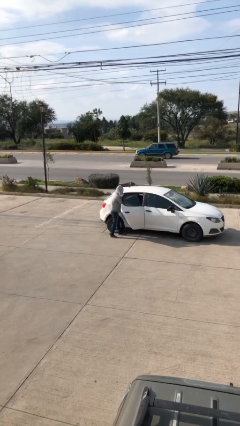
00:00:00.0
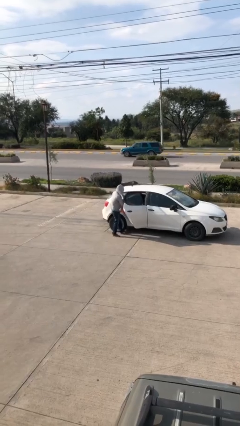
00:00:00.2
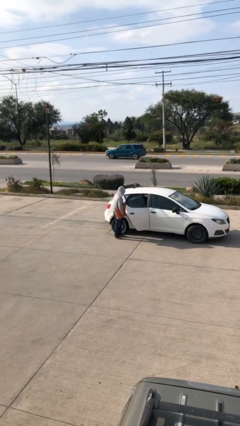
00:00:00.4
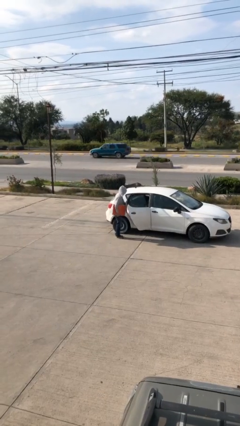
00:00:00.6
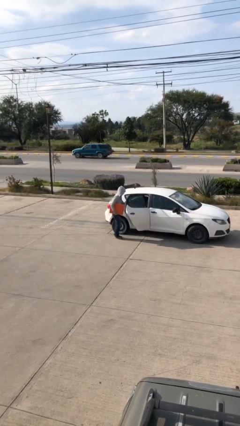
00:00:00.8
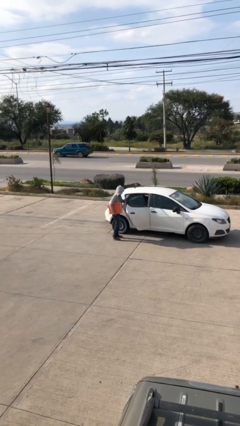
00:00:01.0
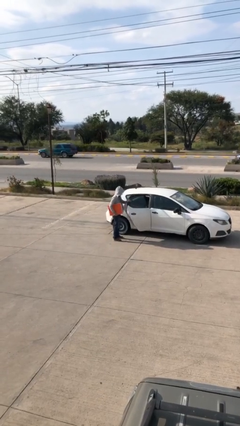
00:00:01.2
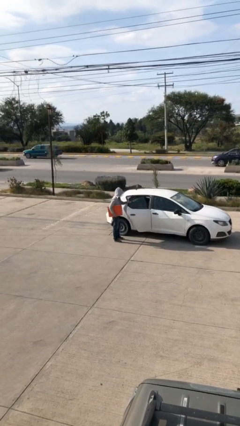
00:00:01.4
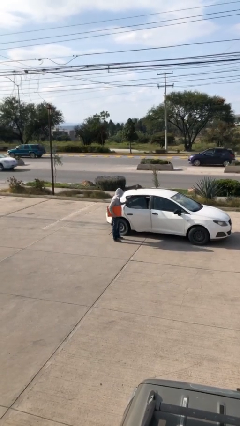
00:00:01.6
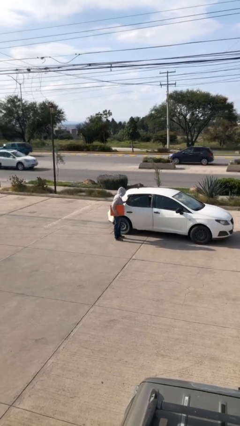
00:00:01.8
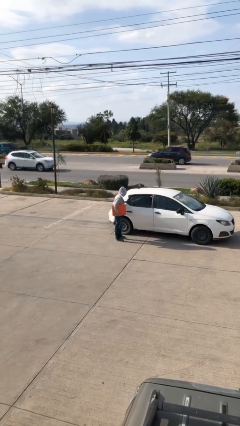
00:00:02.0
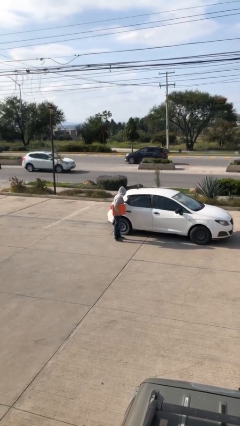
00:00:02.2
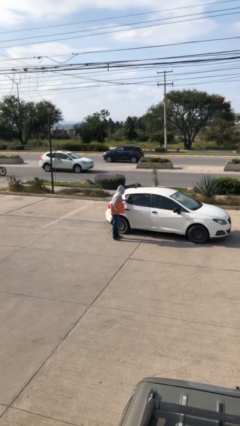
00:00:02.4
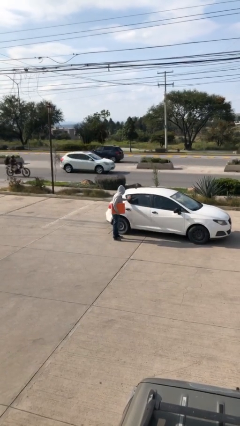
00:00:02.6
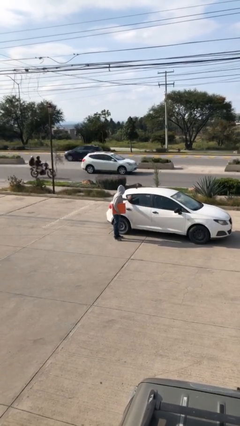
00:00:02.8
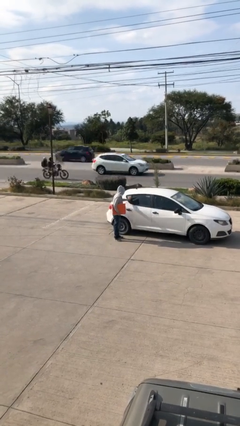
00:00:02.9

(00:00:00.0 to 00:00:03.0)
person closes car door

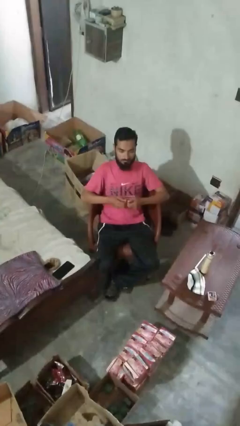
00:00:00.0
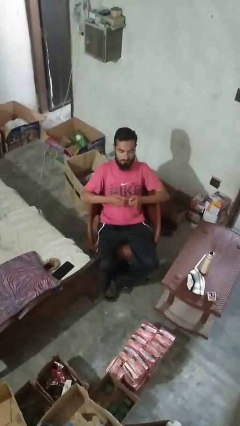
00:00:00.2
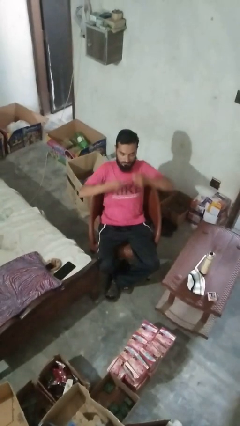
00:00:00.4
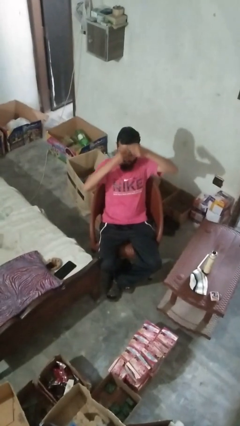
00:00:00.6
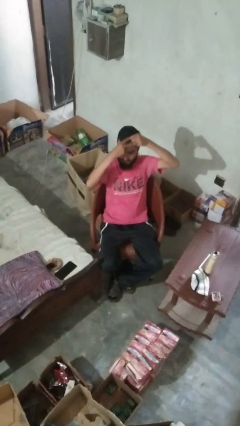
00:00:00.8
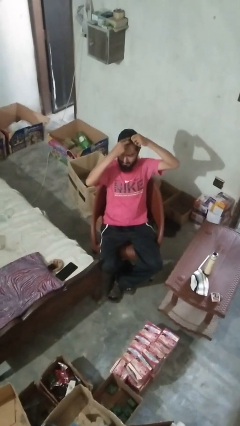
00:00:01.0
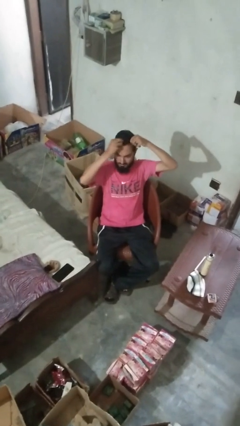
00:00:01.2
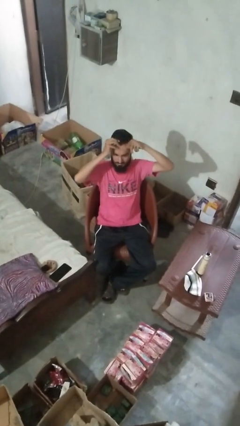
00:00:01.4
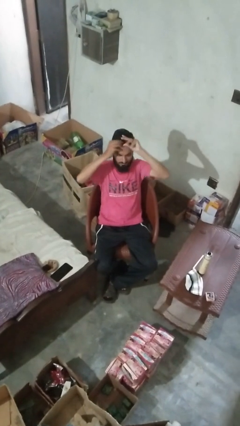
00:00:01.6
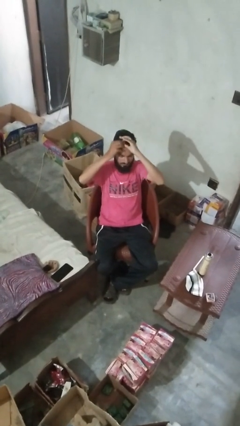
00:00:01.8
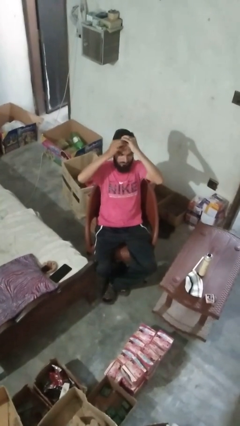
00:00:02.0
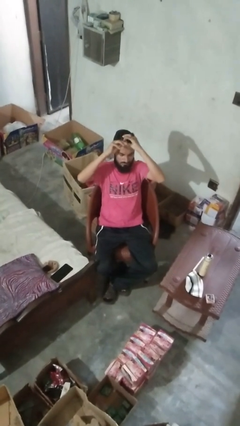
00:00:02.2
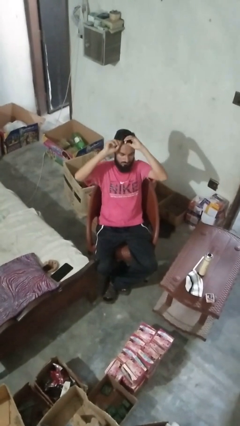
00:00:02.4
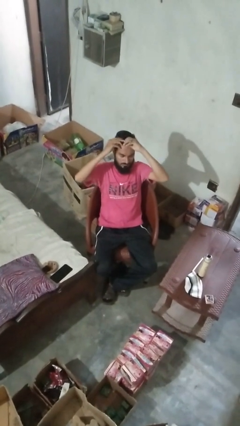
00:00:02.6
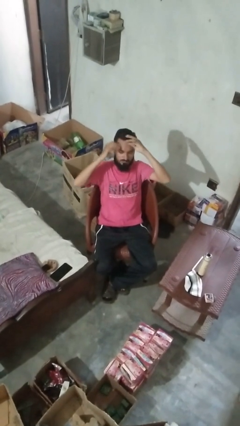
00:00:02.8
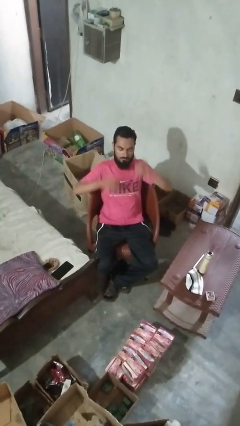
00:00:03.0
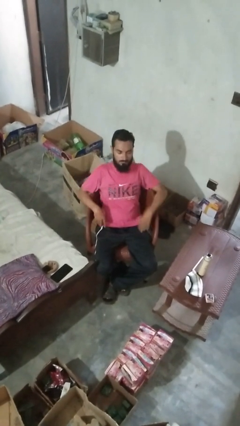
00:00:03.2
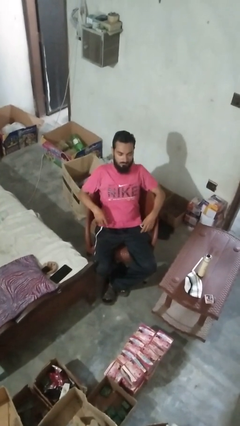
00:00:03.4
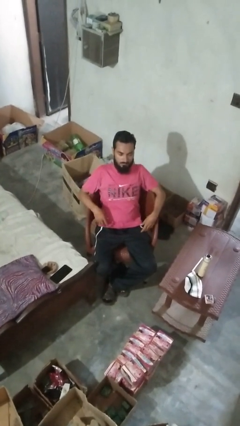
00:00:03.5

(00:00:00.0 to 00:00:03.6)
person puts hair in ponytail

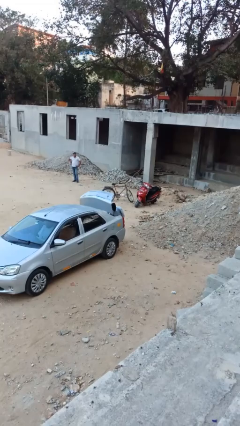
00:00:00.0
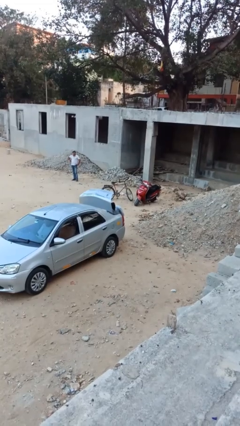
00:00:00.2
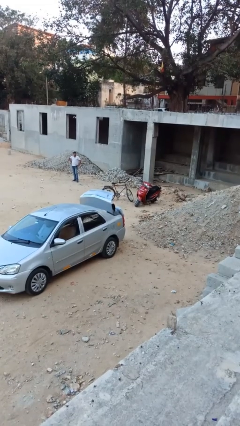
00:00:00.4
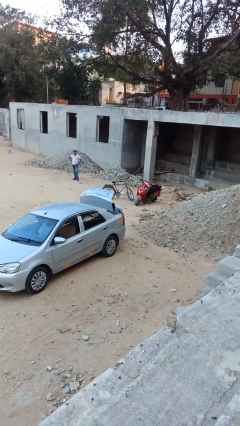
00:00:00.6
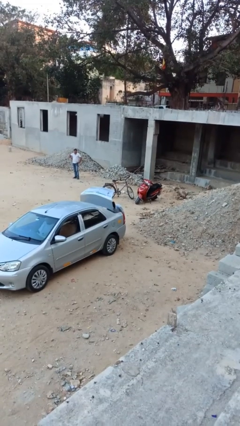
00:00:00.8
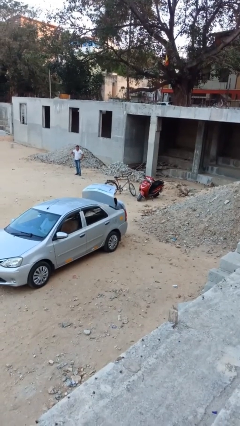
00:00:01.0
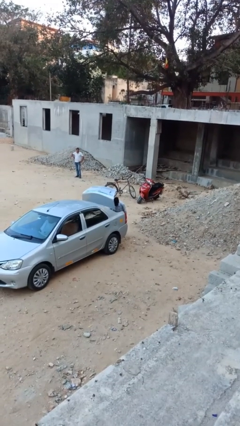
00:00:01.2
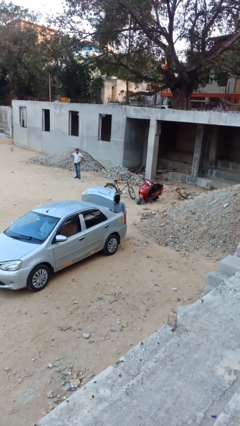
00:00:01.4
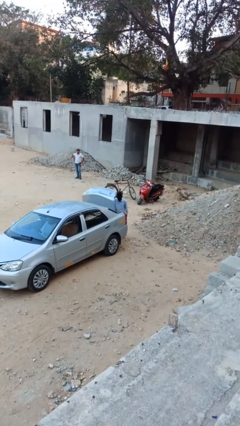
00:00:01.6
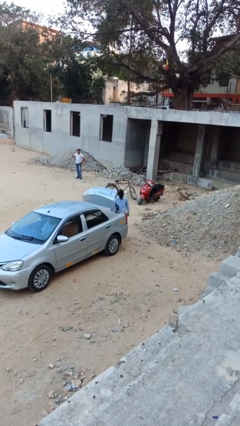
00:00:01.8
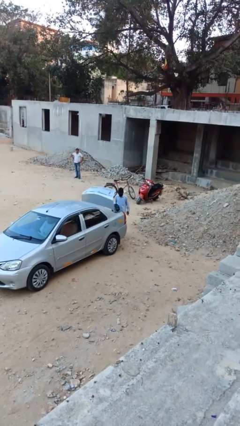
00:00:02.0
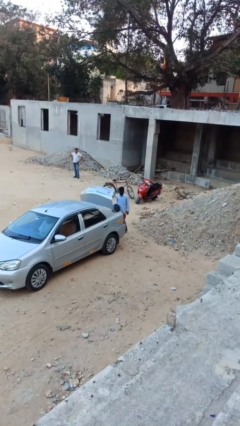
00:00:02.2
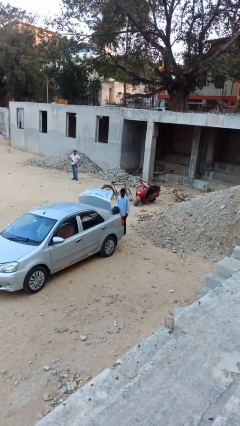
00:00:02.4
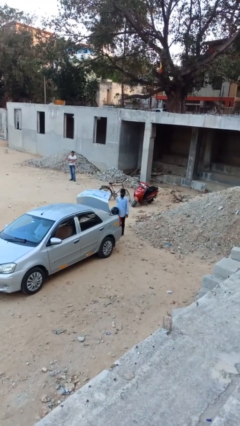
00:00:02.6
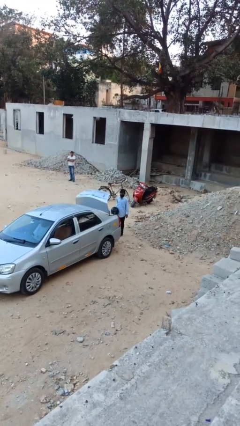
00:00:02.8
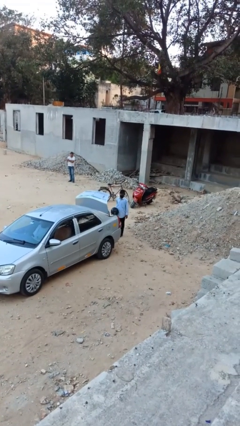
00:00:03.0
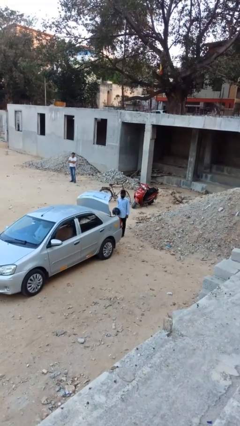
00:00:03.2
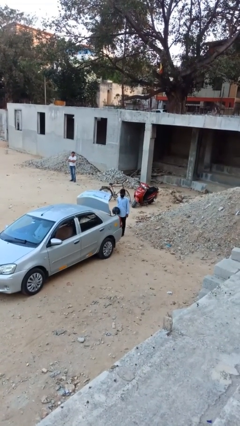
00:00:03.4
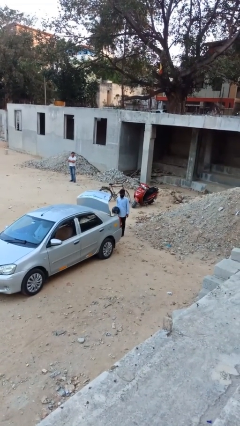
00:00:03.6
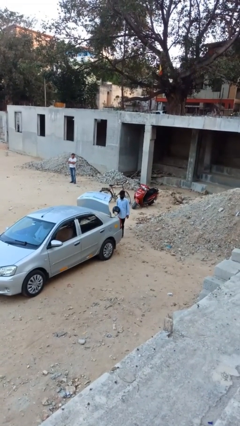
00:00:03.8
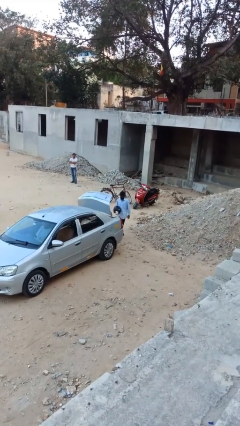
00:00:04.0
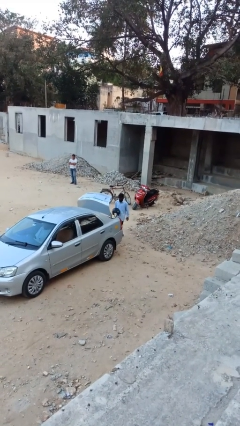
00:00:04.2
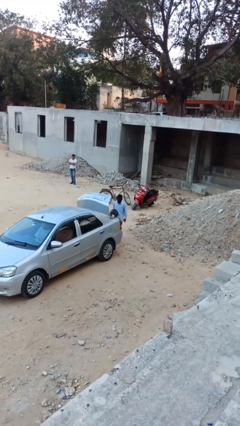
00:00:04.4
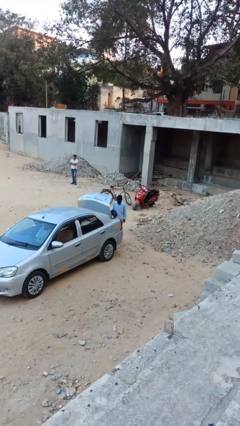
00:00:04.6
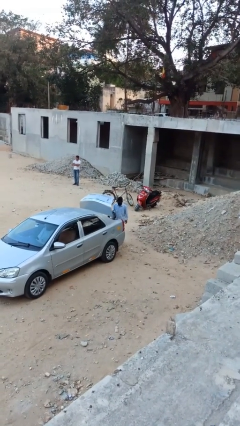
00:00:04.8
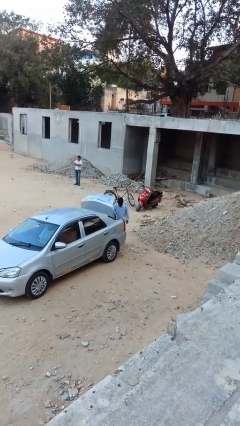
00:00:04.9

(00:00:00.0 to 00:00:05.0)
person unloads car

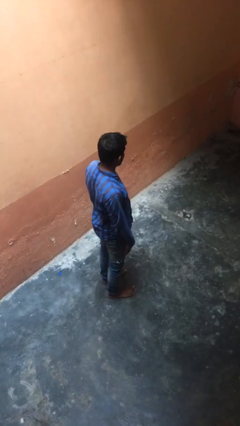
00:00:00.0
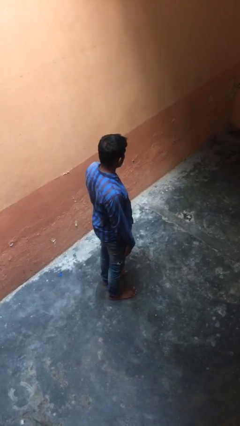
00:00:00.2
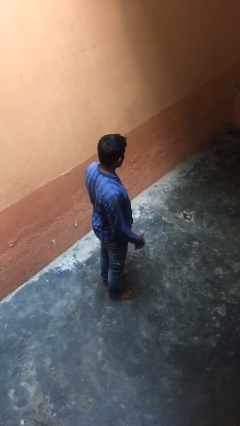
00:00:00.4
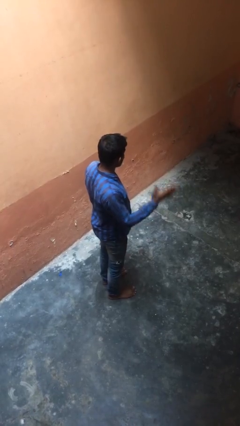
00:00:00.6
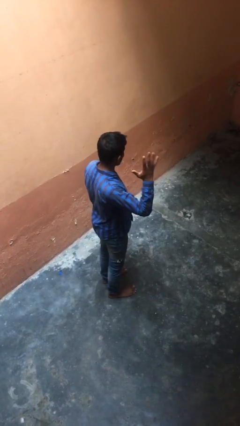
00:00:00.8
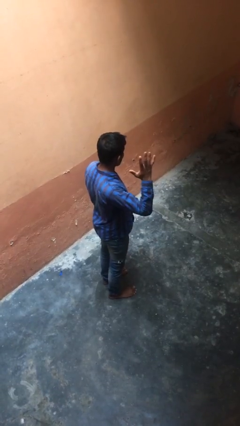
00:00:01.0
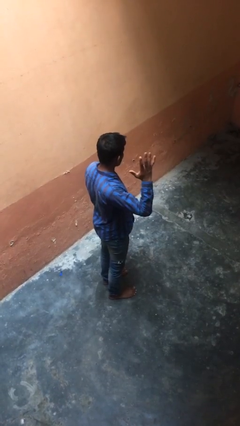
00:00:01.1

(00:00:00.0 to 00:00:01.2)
person gestures number five

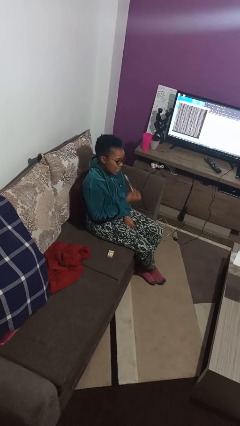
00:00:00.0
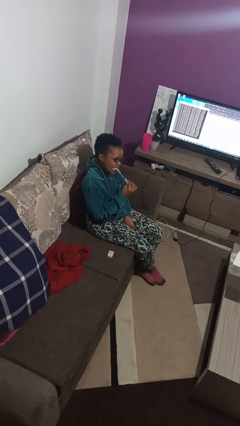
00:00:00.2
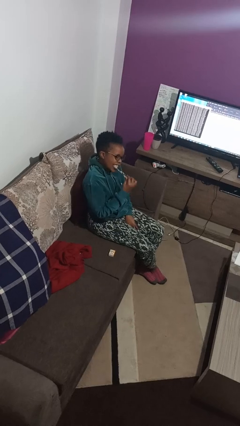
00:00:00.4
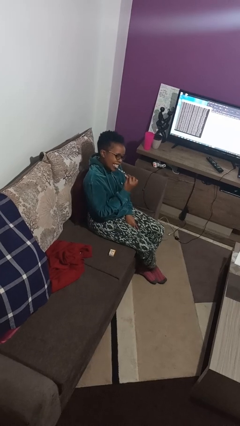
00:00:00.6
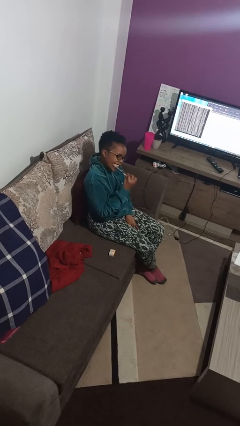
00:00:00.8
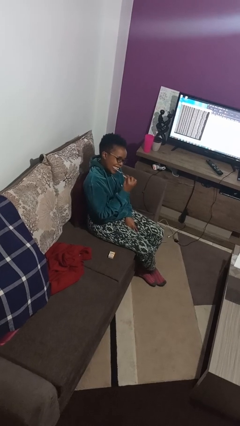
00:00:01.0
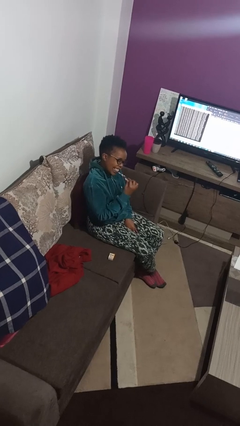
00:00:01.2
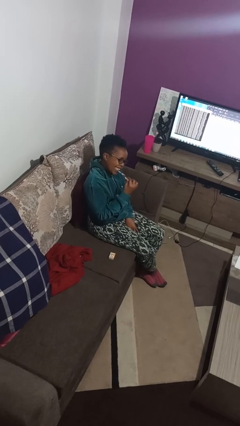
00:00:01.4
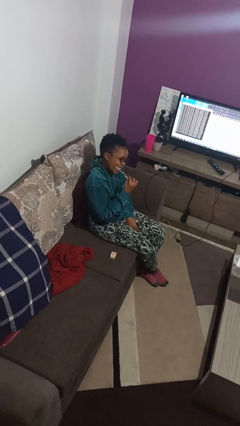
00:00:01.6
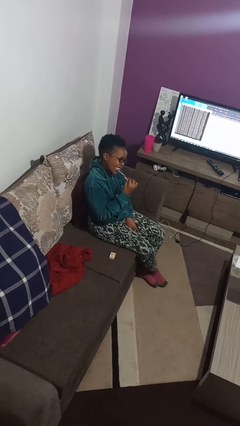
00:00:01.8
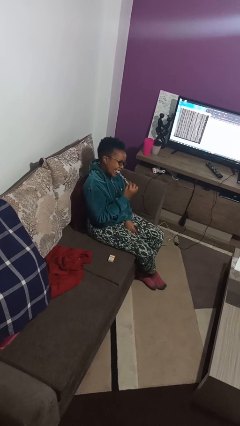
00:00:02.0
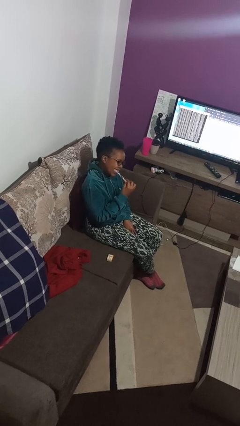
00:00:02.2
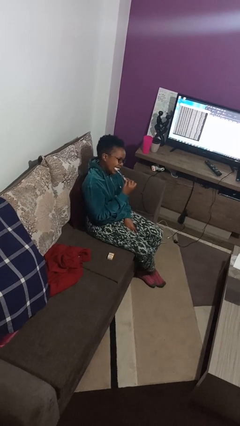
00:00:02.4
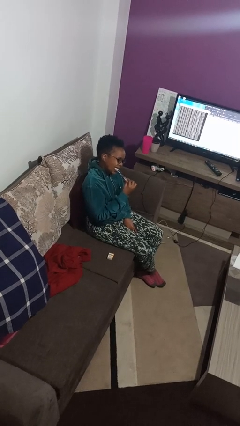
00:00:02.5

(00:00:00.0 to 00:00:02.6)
person brushes teeth

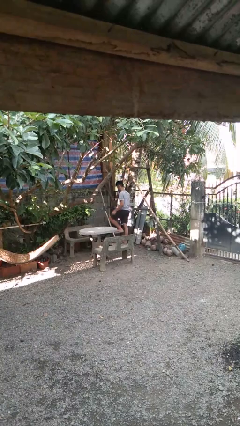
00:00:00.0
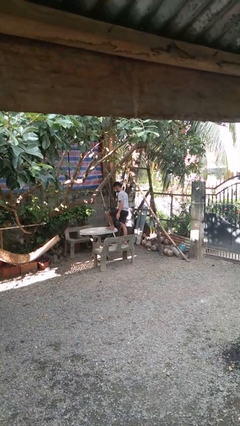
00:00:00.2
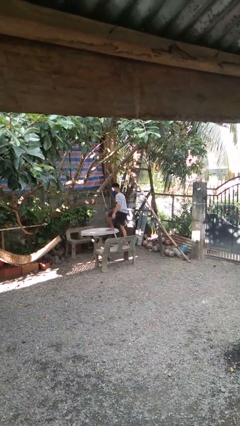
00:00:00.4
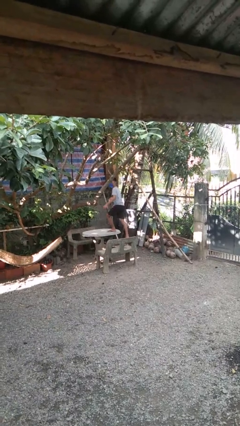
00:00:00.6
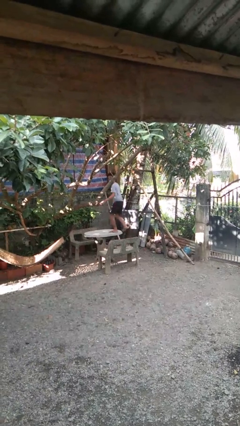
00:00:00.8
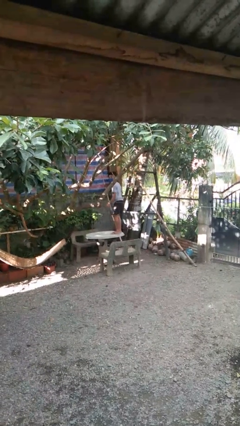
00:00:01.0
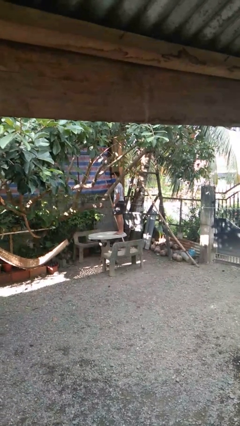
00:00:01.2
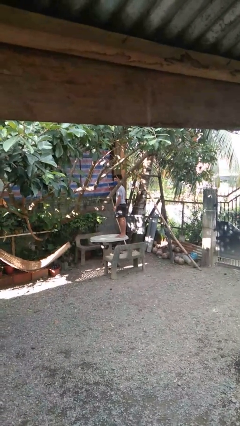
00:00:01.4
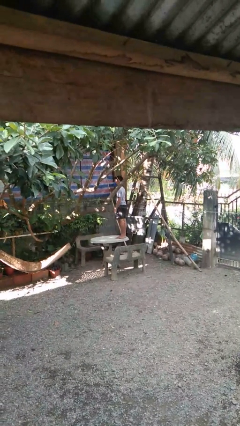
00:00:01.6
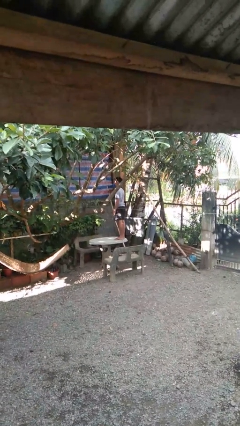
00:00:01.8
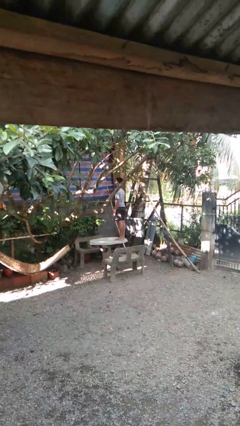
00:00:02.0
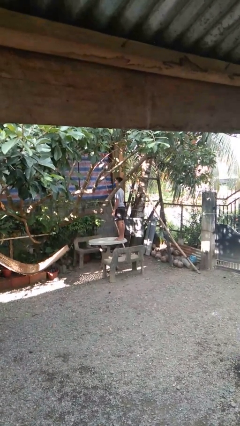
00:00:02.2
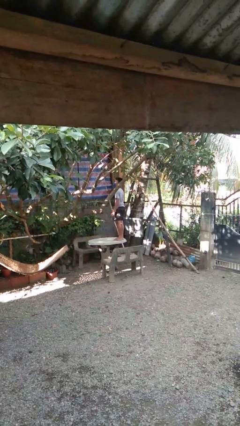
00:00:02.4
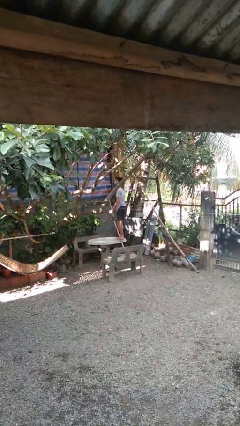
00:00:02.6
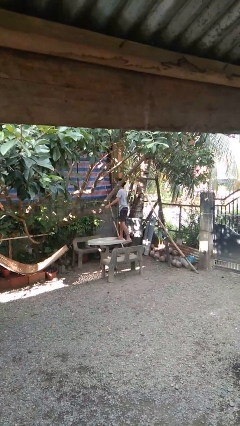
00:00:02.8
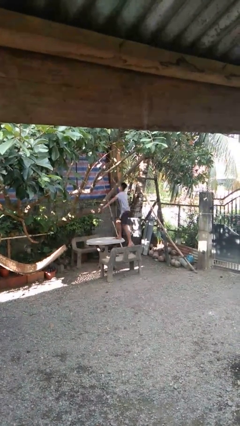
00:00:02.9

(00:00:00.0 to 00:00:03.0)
person climbs on table
